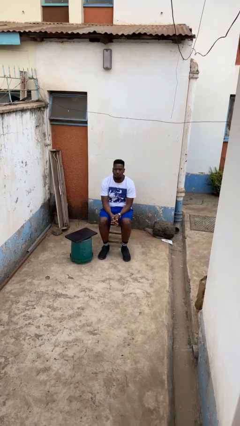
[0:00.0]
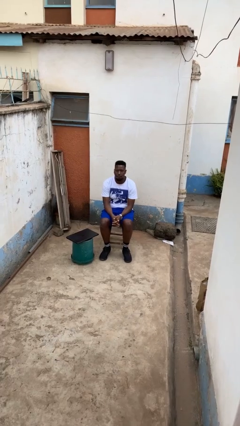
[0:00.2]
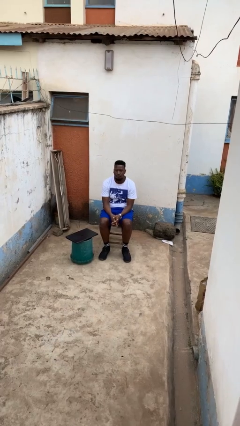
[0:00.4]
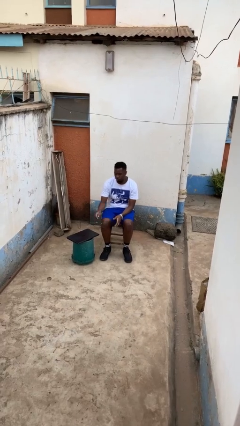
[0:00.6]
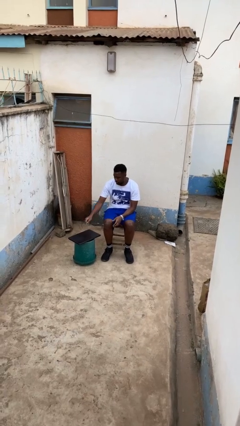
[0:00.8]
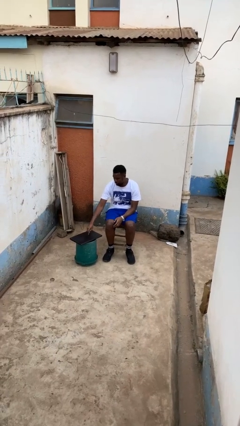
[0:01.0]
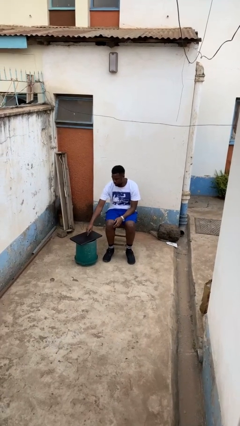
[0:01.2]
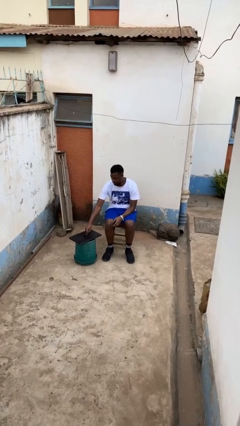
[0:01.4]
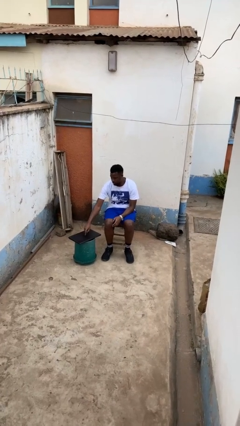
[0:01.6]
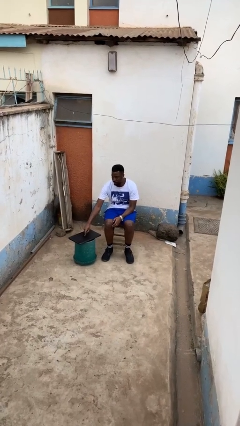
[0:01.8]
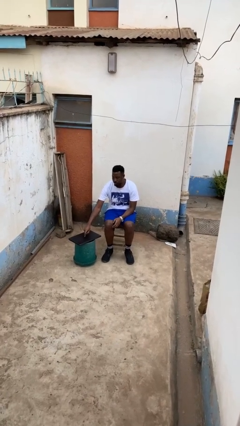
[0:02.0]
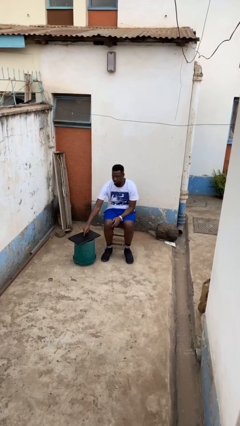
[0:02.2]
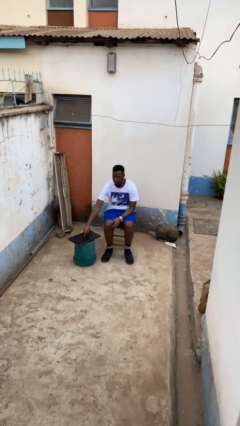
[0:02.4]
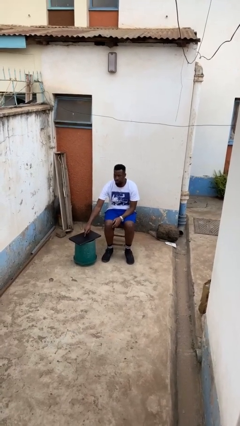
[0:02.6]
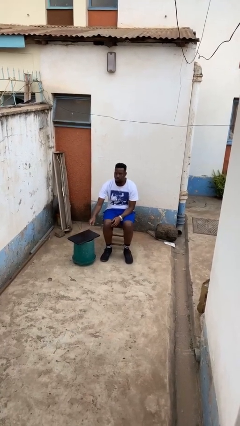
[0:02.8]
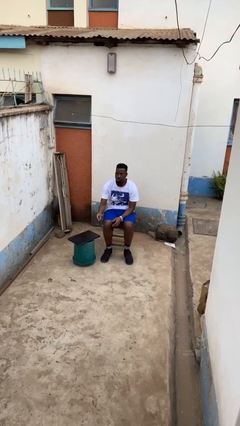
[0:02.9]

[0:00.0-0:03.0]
person taps object with finger

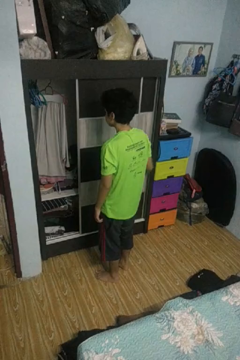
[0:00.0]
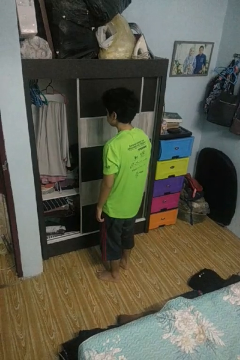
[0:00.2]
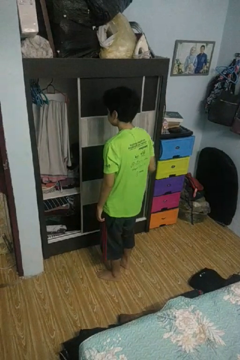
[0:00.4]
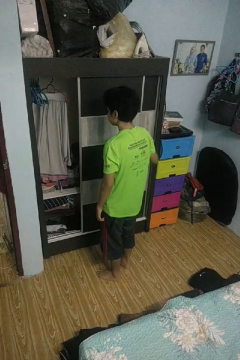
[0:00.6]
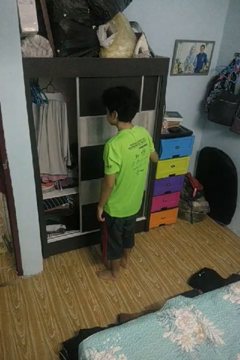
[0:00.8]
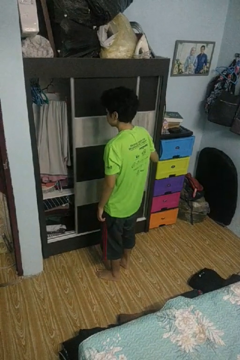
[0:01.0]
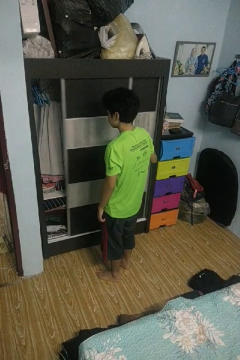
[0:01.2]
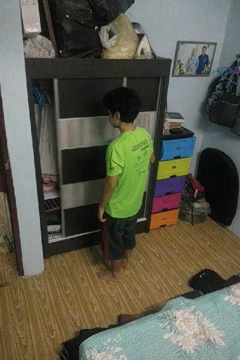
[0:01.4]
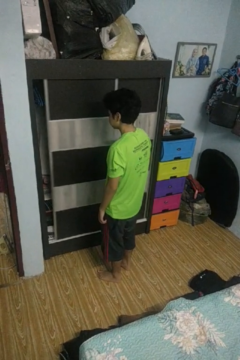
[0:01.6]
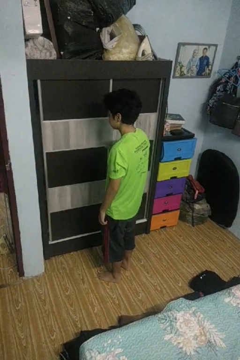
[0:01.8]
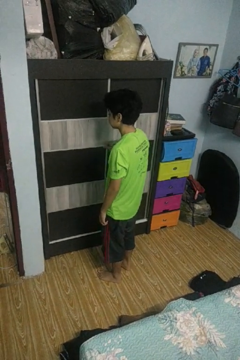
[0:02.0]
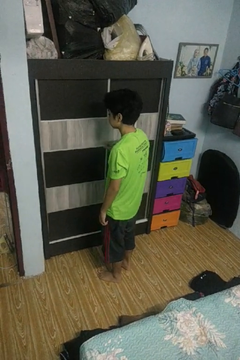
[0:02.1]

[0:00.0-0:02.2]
person closes closet door

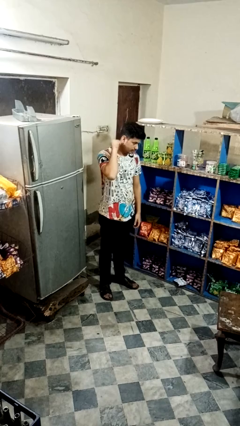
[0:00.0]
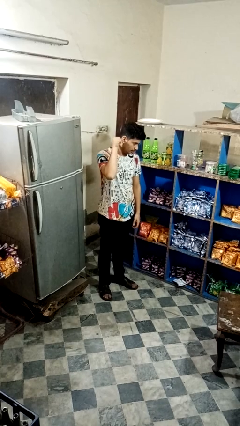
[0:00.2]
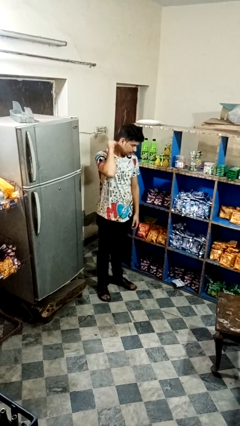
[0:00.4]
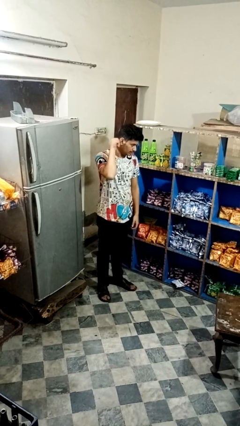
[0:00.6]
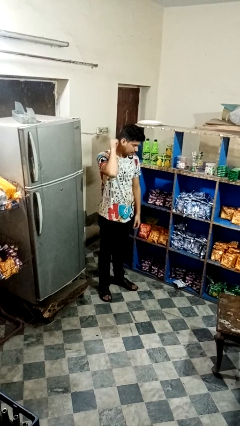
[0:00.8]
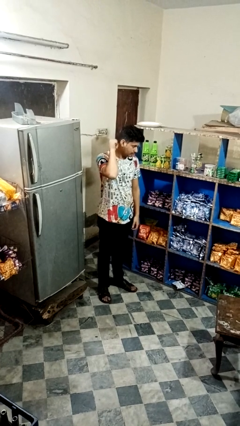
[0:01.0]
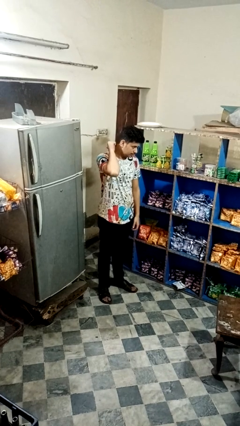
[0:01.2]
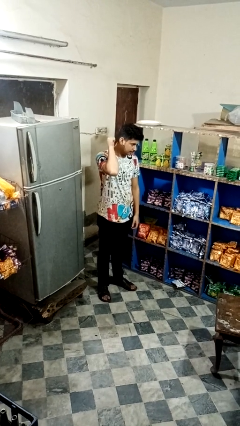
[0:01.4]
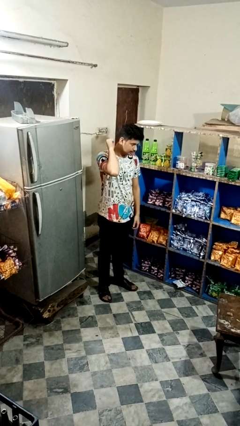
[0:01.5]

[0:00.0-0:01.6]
person gestures behind me

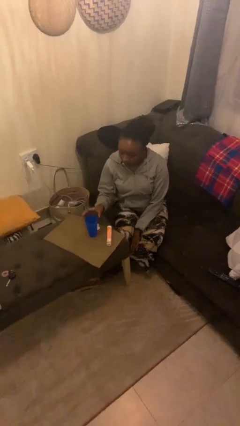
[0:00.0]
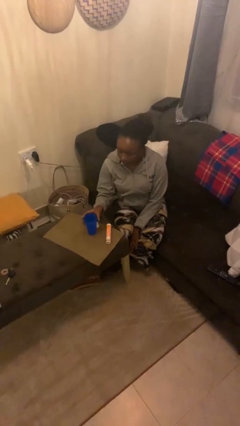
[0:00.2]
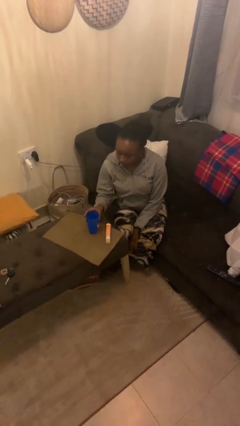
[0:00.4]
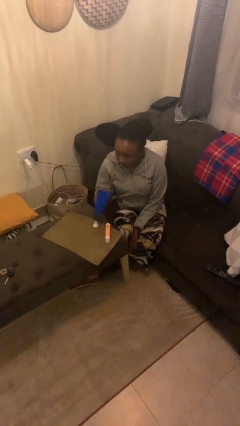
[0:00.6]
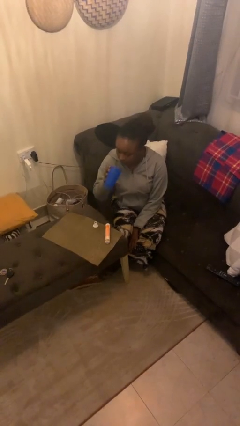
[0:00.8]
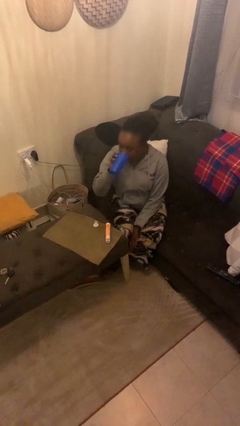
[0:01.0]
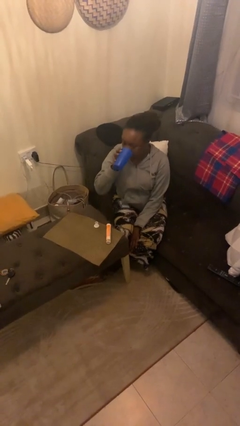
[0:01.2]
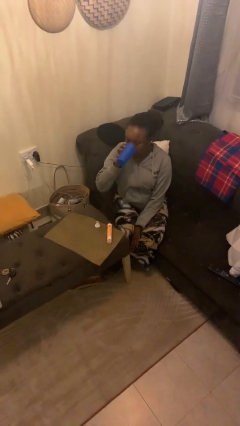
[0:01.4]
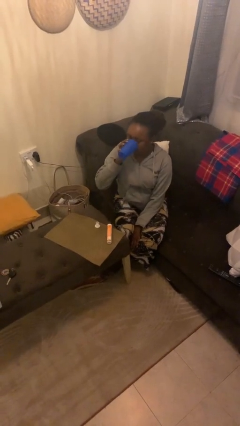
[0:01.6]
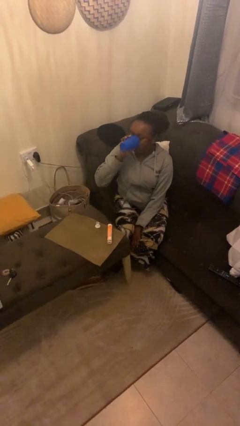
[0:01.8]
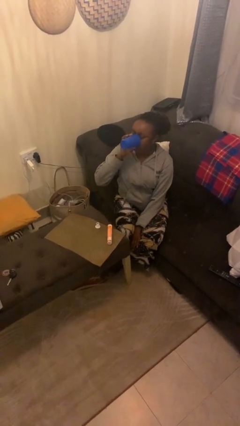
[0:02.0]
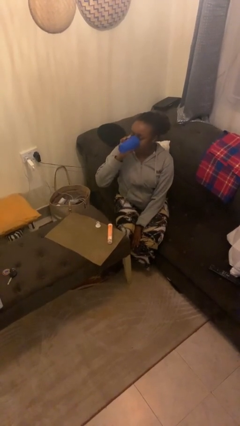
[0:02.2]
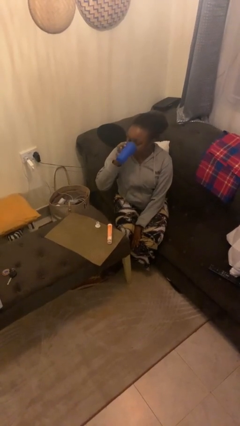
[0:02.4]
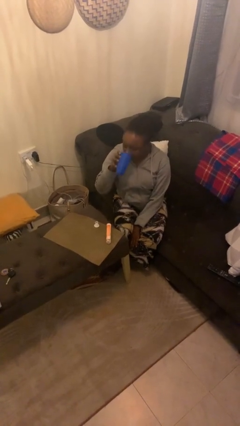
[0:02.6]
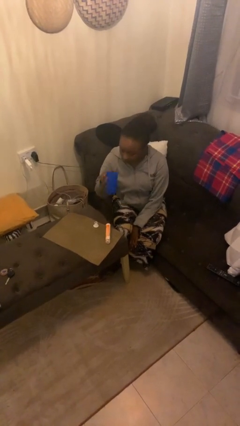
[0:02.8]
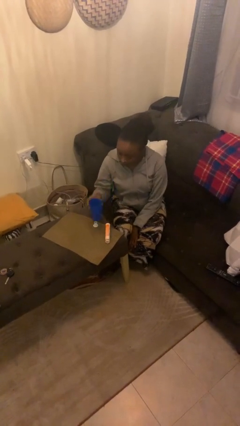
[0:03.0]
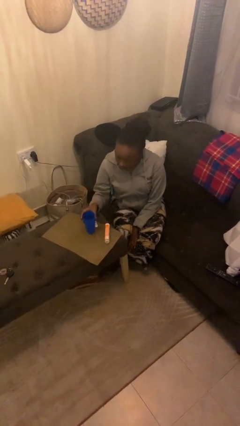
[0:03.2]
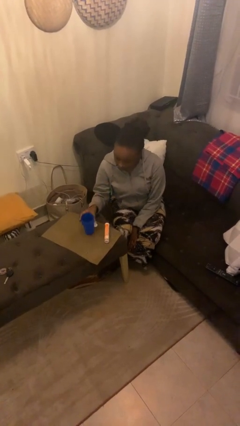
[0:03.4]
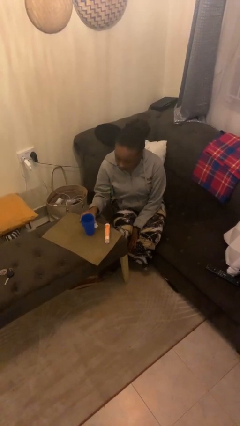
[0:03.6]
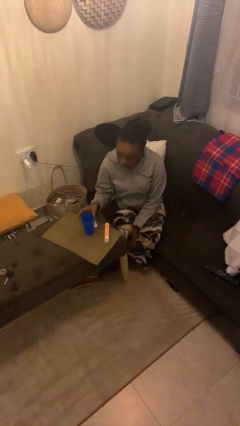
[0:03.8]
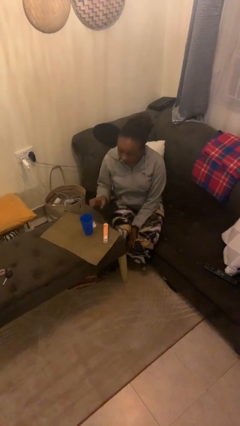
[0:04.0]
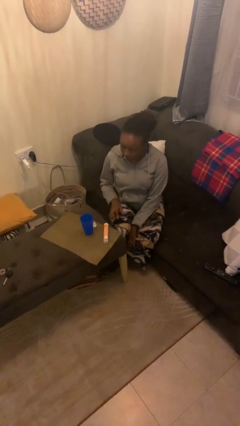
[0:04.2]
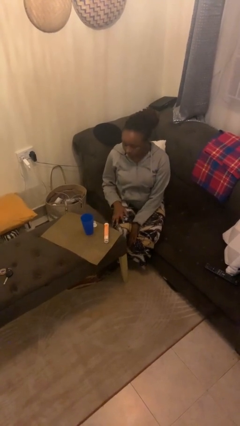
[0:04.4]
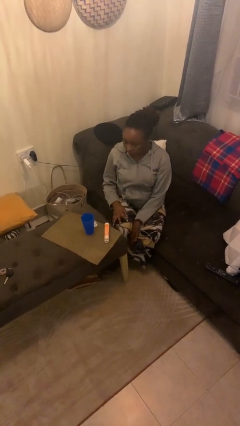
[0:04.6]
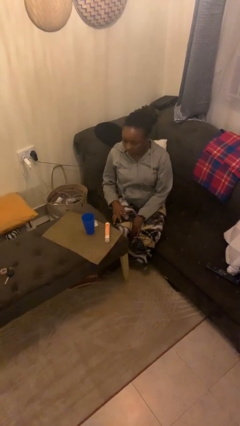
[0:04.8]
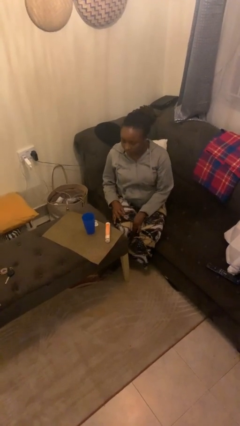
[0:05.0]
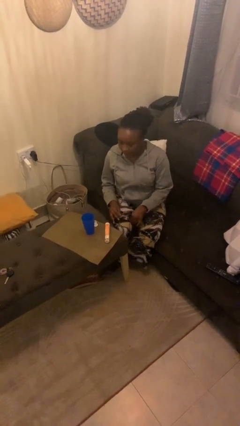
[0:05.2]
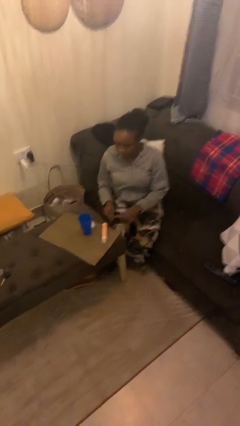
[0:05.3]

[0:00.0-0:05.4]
person drinks from cup

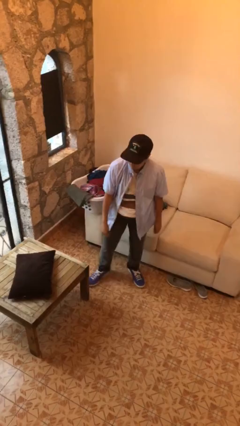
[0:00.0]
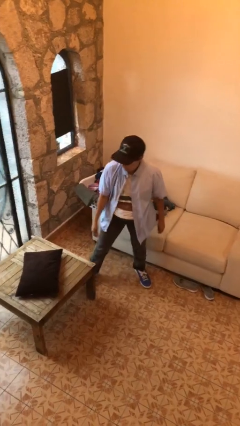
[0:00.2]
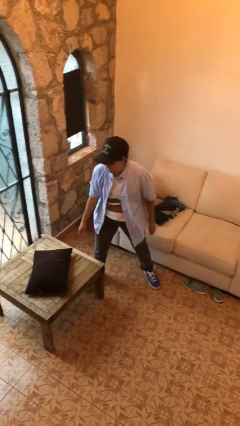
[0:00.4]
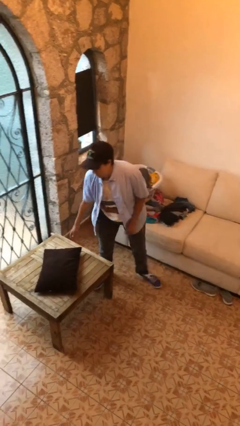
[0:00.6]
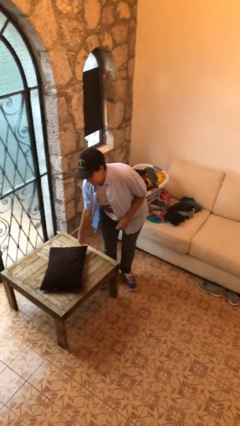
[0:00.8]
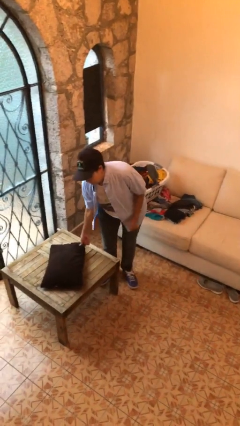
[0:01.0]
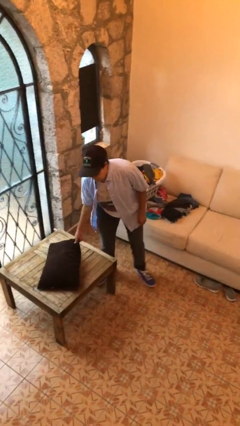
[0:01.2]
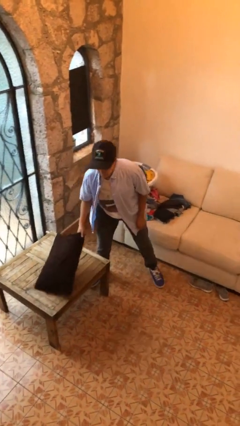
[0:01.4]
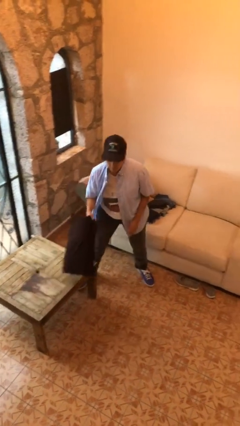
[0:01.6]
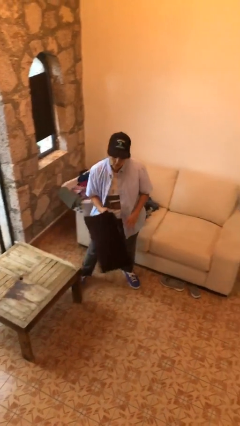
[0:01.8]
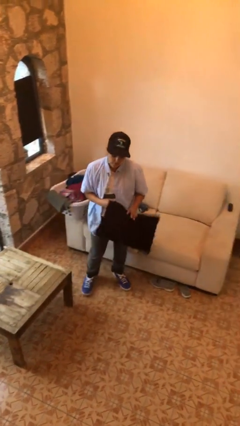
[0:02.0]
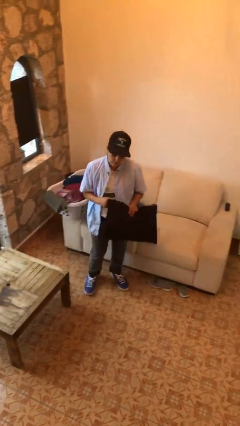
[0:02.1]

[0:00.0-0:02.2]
person picks up object from table

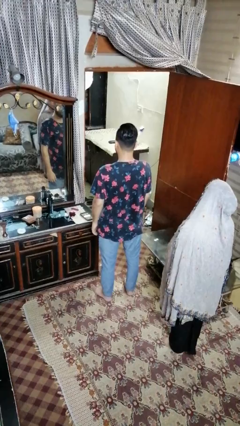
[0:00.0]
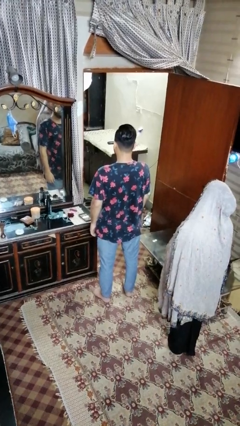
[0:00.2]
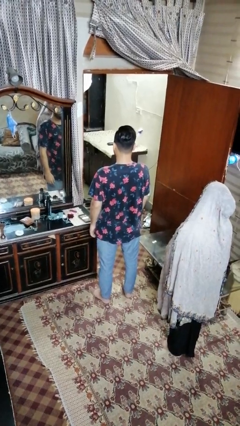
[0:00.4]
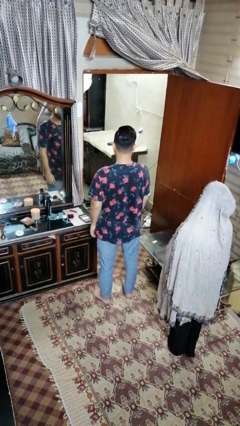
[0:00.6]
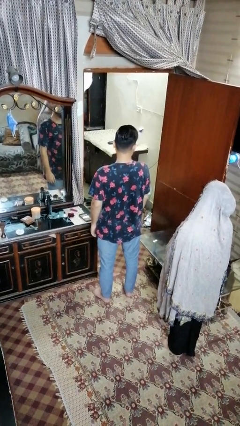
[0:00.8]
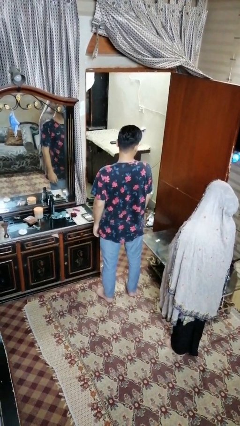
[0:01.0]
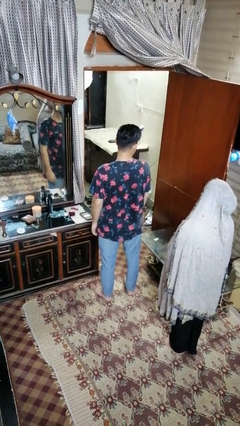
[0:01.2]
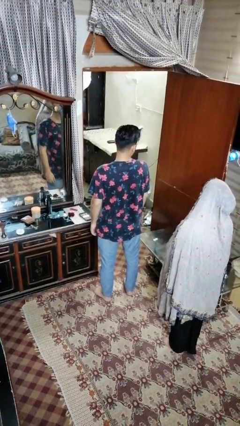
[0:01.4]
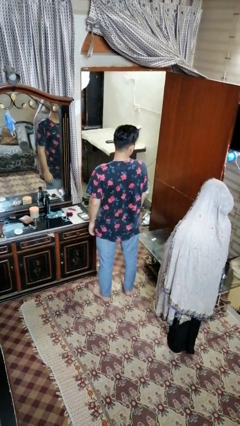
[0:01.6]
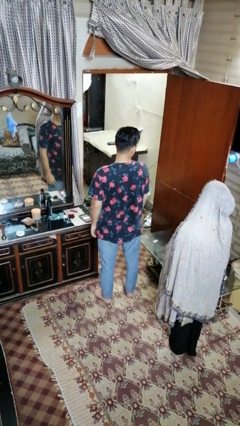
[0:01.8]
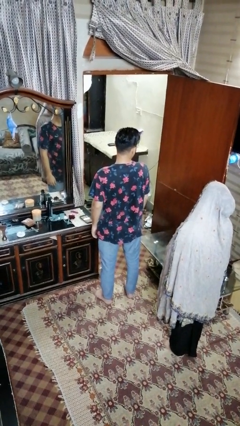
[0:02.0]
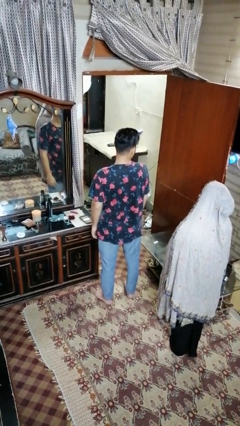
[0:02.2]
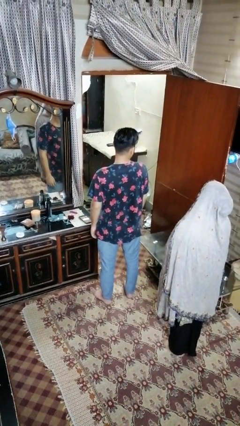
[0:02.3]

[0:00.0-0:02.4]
person looks over shoulder

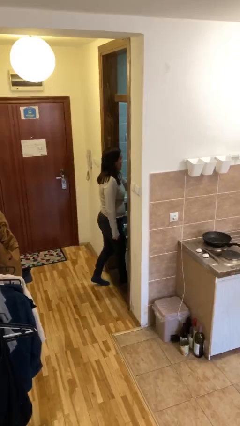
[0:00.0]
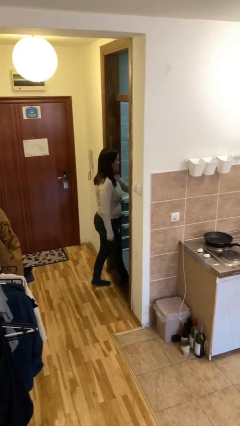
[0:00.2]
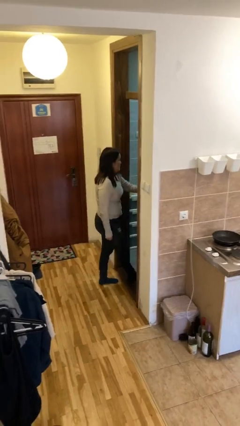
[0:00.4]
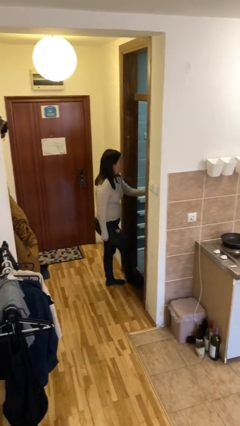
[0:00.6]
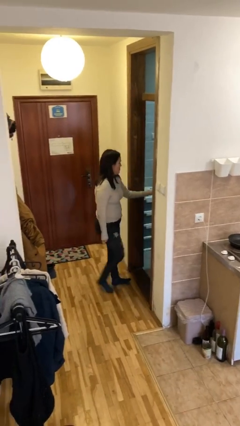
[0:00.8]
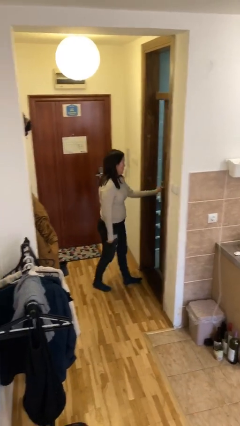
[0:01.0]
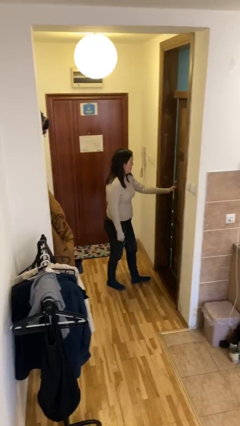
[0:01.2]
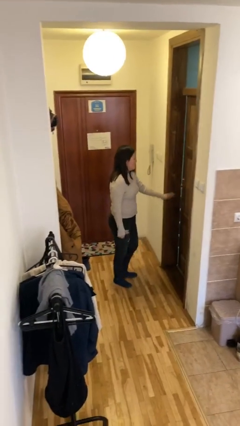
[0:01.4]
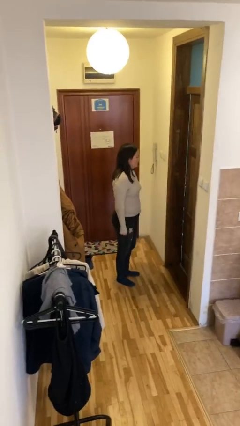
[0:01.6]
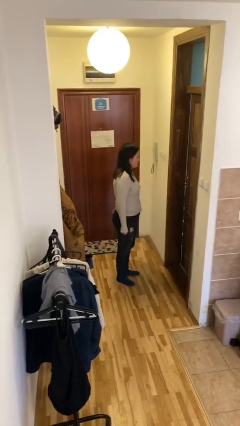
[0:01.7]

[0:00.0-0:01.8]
person closes facility door
